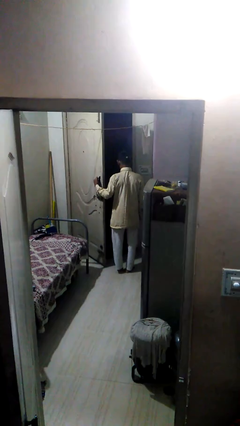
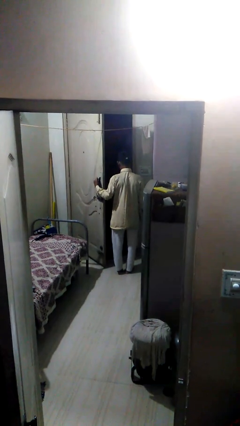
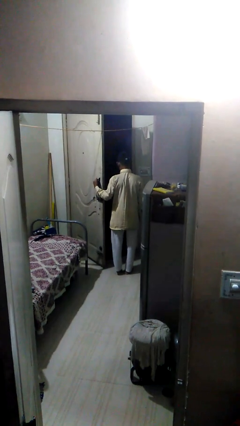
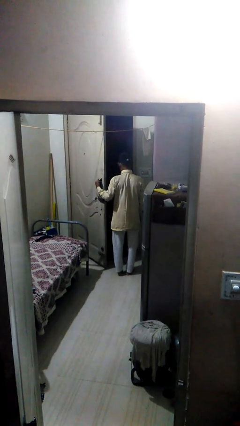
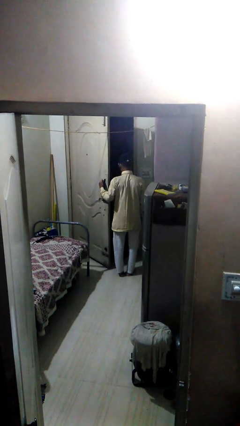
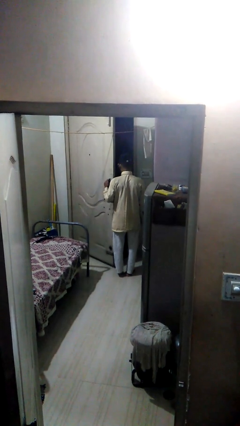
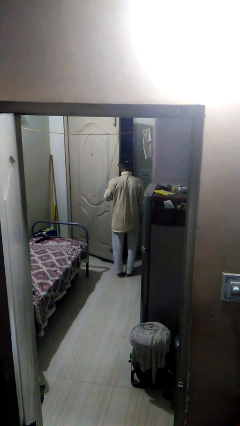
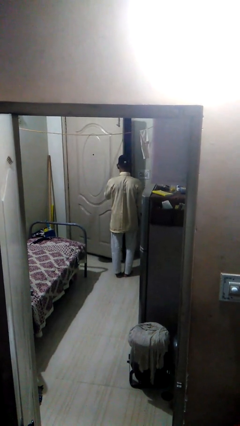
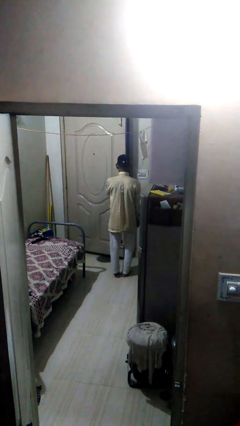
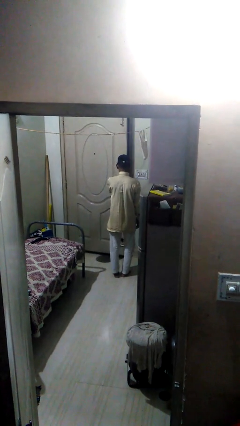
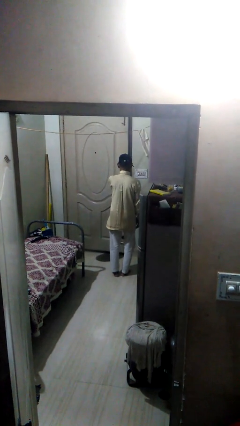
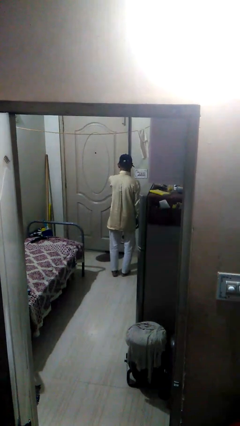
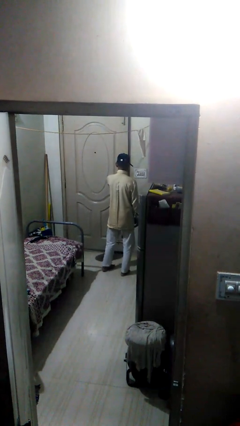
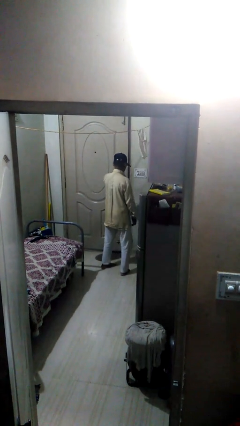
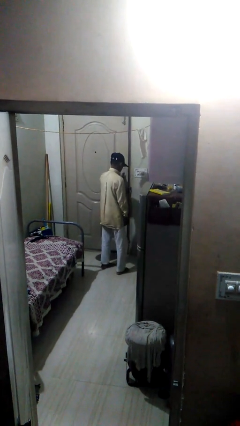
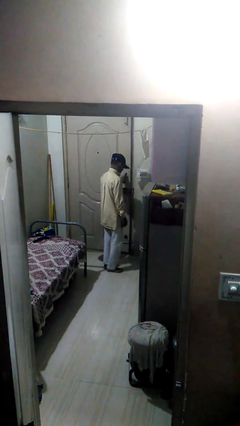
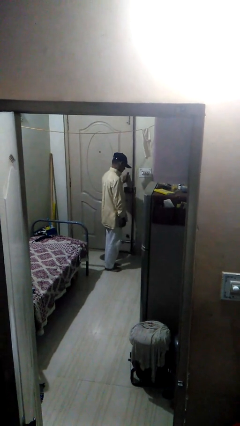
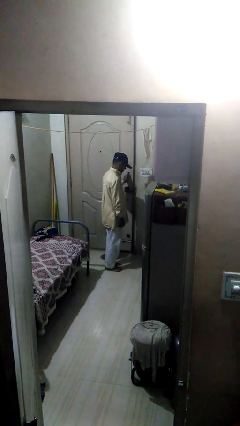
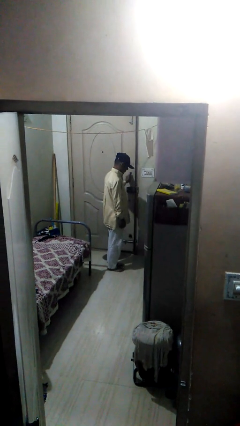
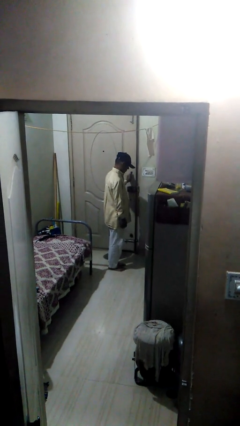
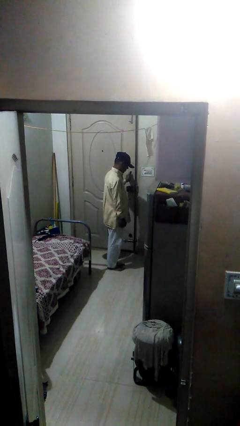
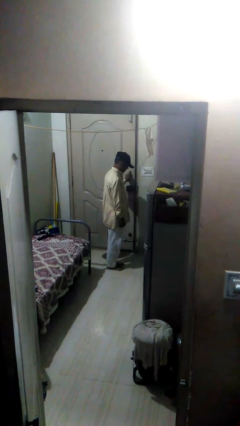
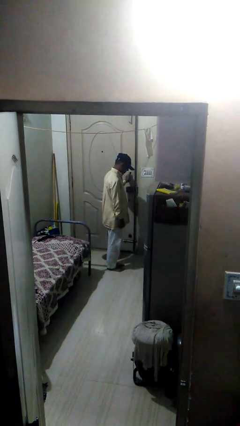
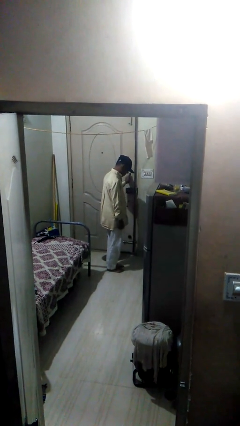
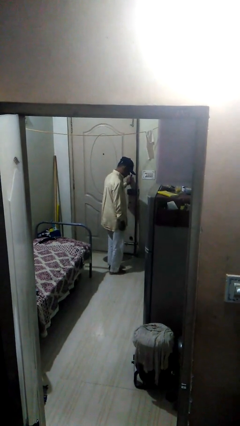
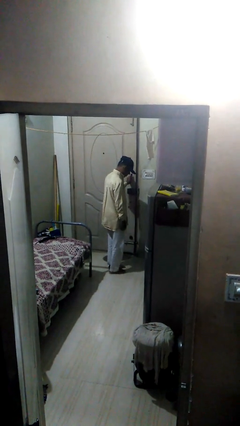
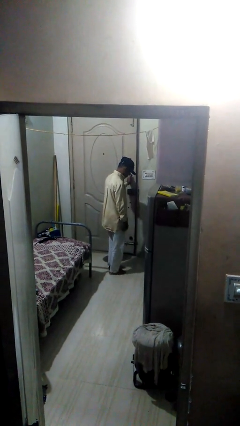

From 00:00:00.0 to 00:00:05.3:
person closes facility door

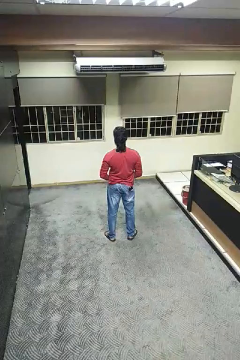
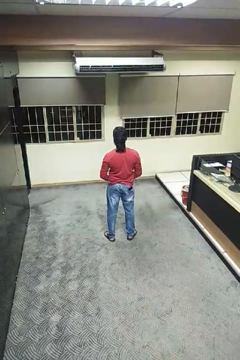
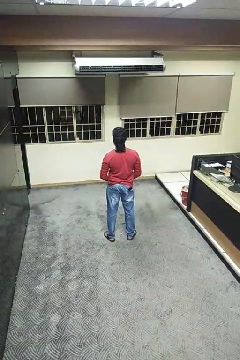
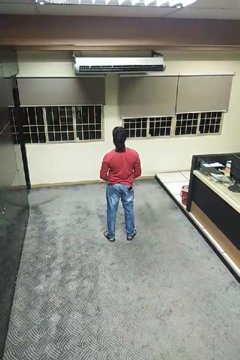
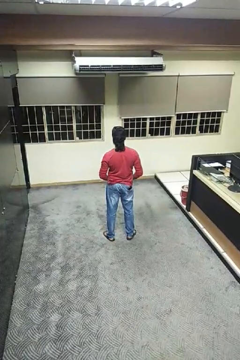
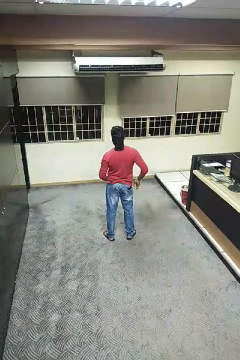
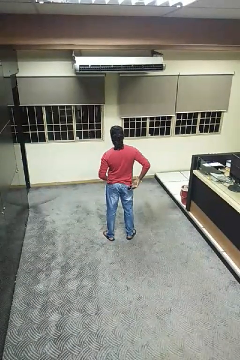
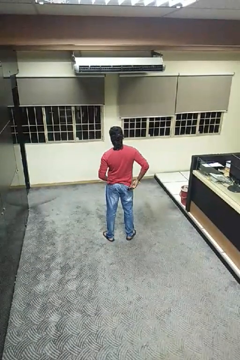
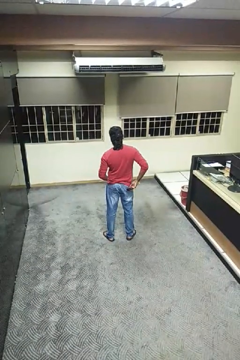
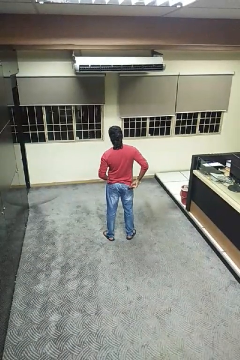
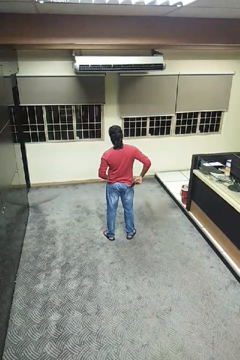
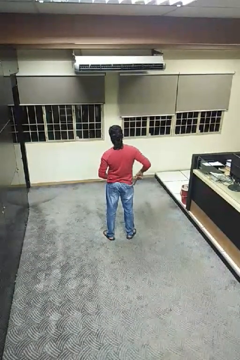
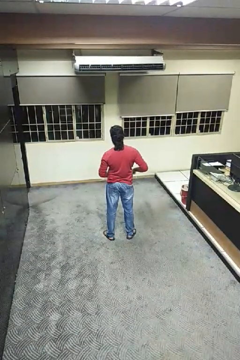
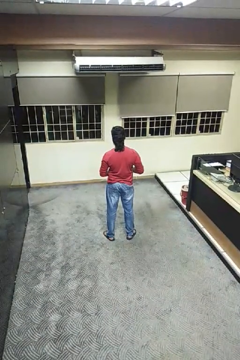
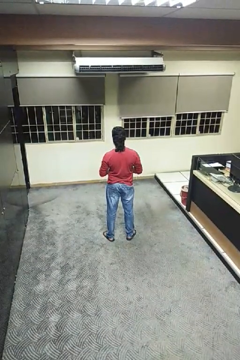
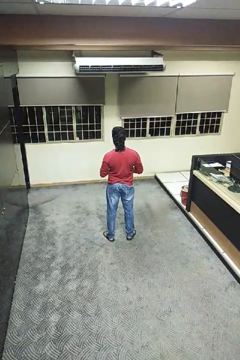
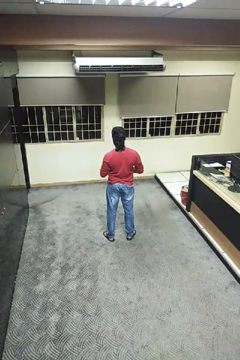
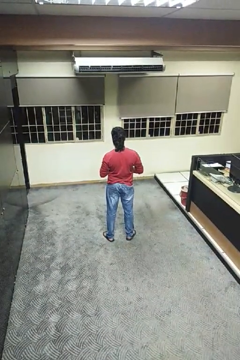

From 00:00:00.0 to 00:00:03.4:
person takes phone from pocket

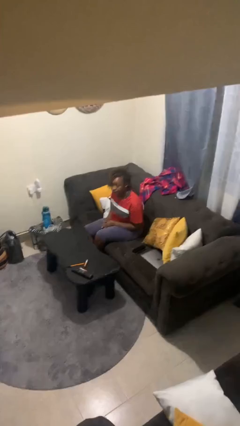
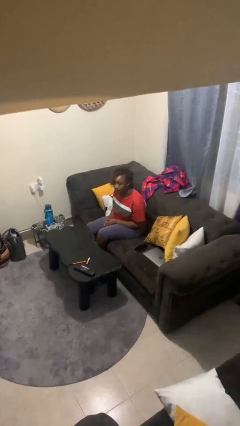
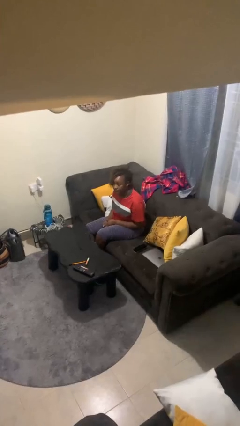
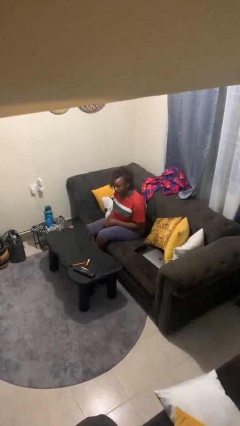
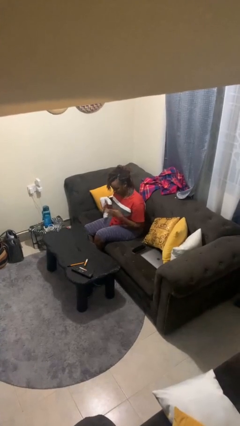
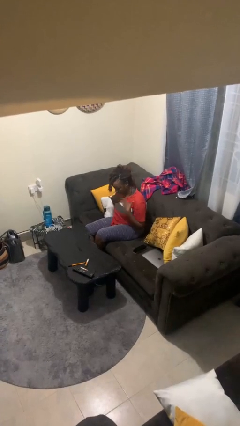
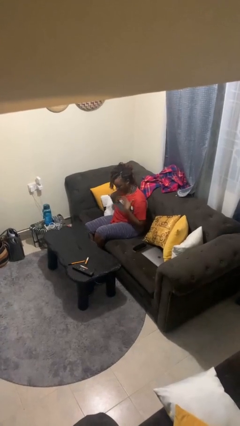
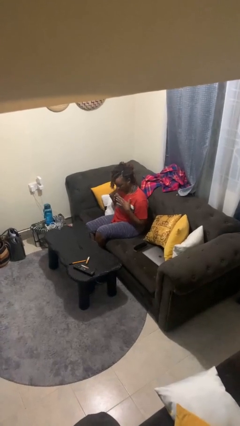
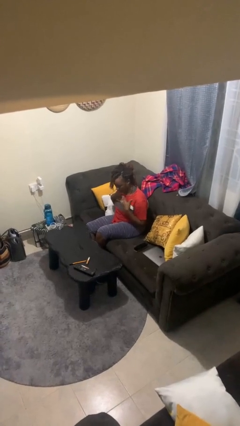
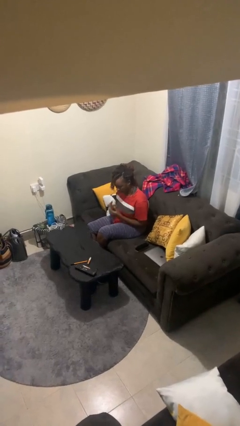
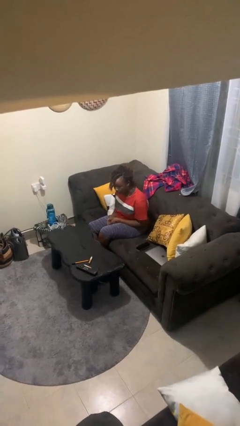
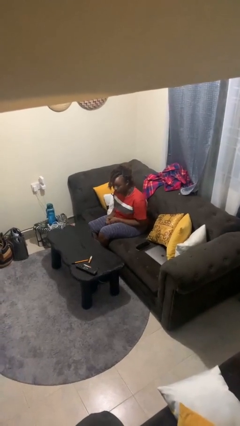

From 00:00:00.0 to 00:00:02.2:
person drums on chest

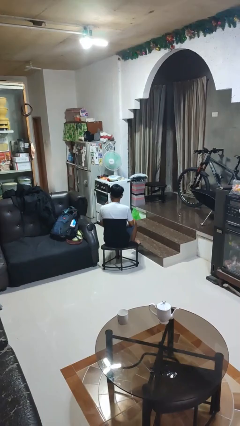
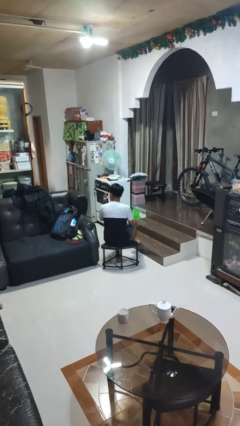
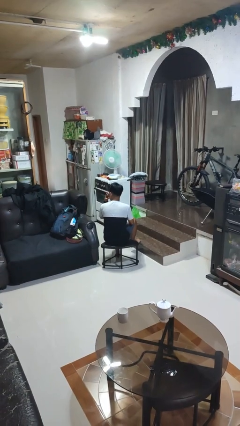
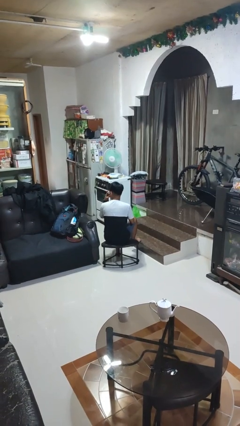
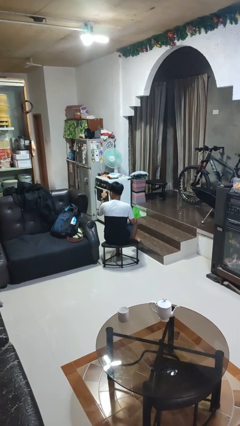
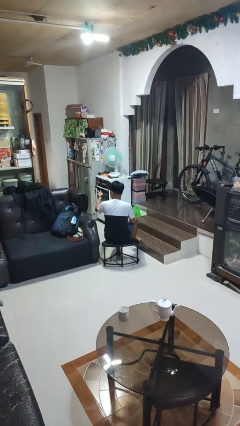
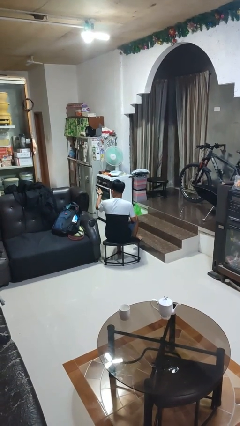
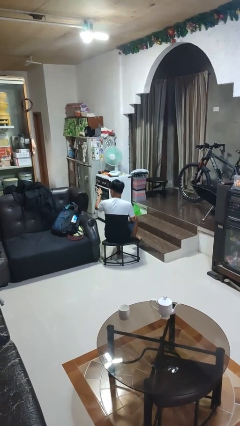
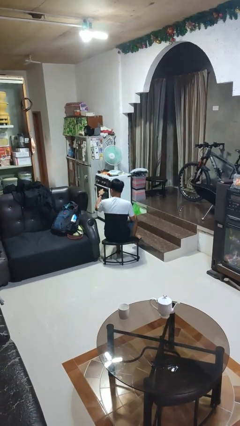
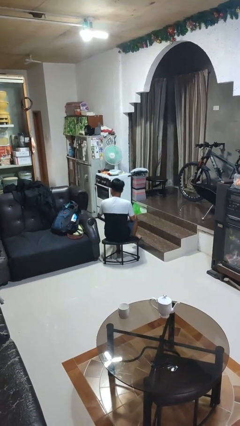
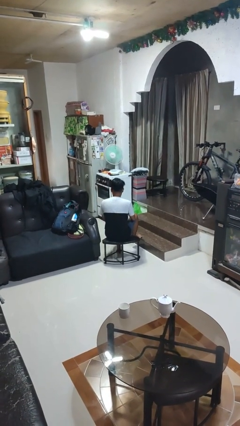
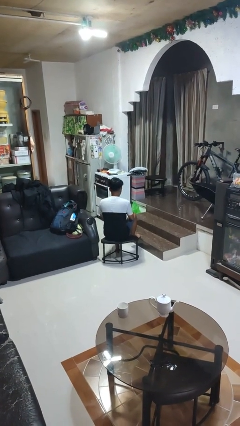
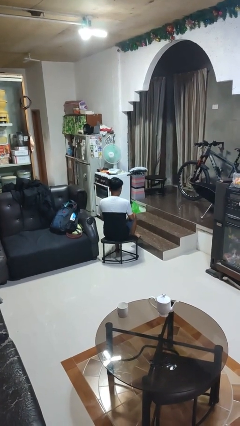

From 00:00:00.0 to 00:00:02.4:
person gestures watch closely

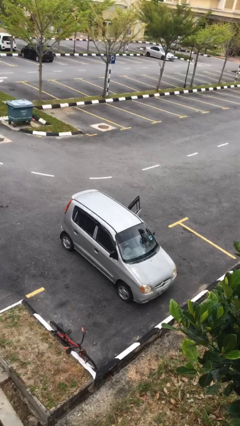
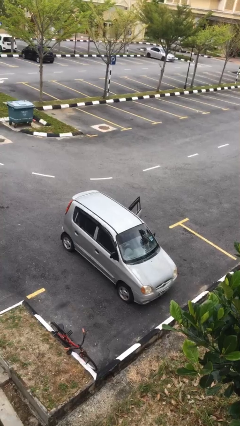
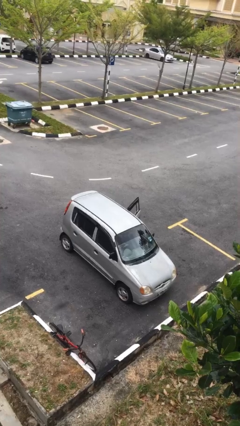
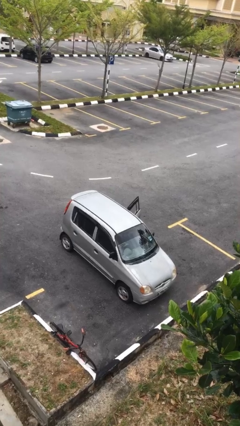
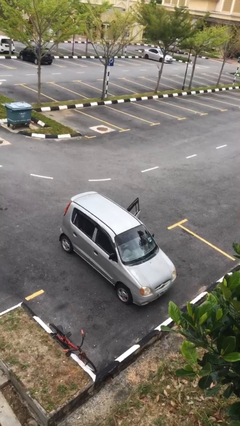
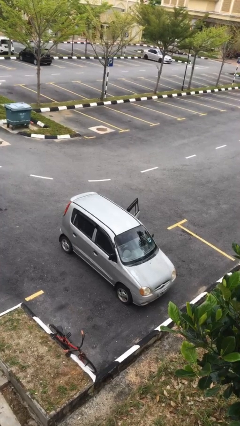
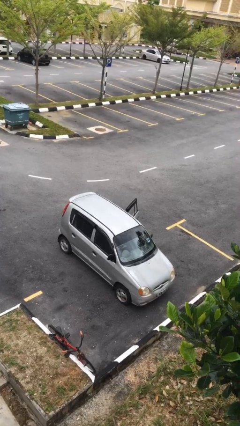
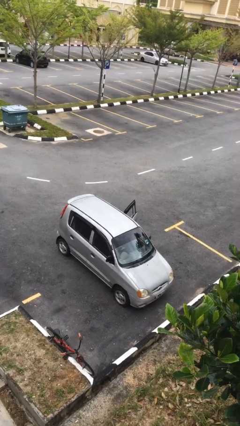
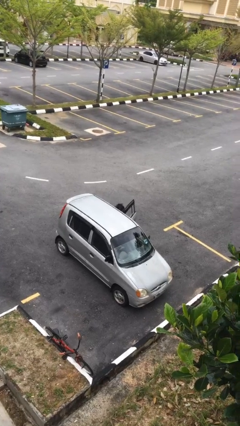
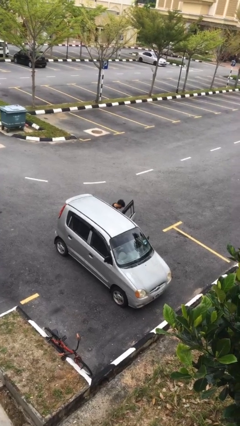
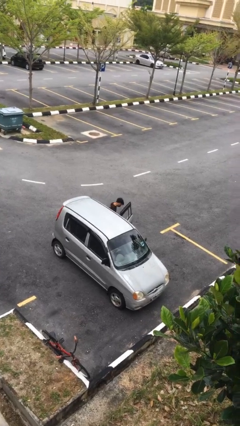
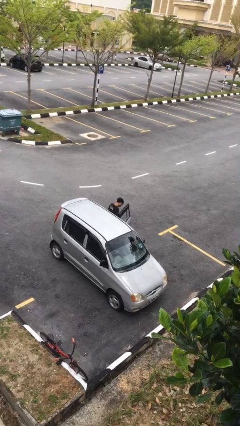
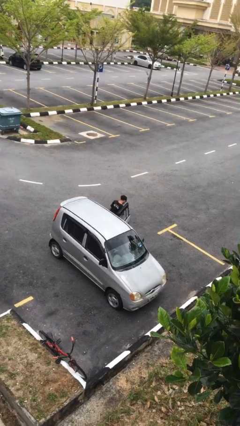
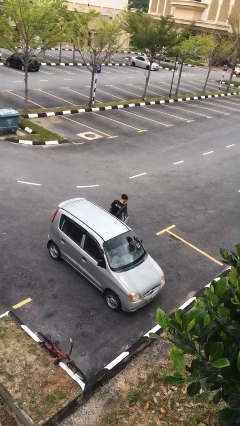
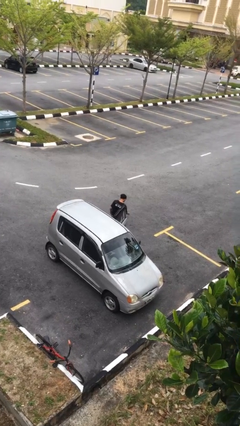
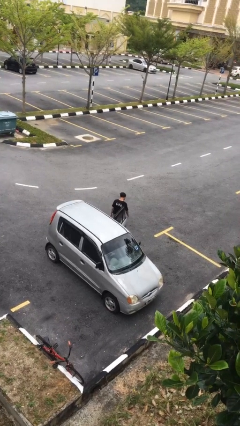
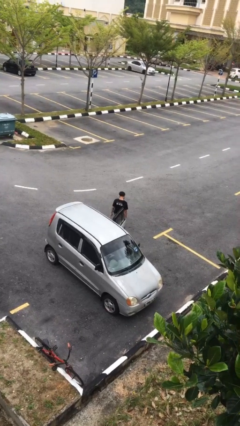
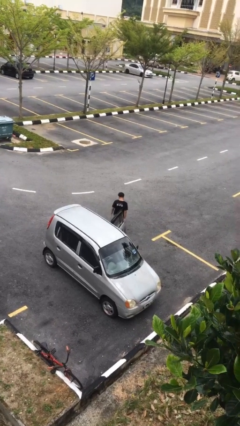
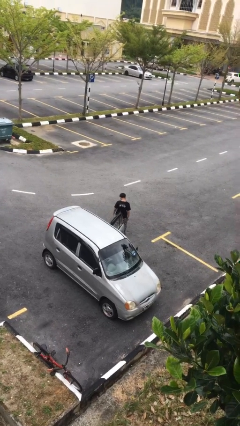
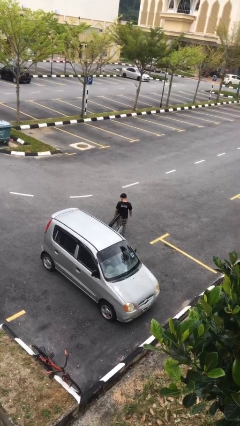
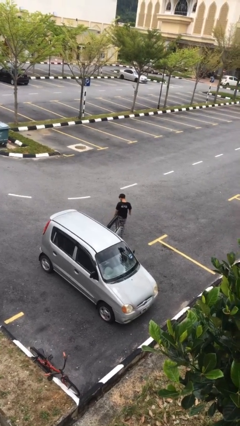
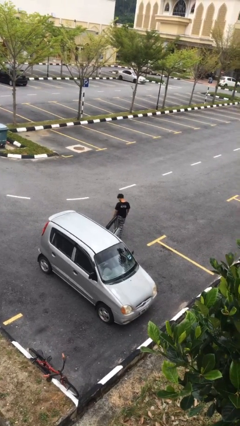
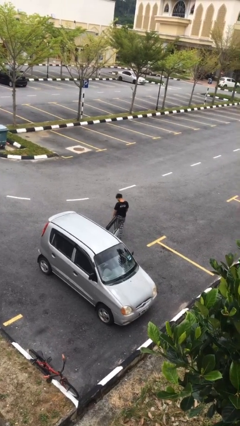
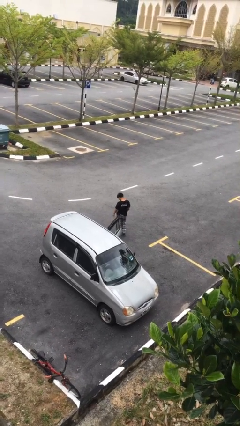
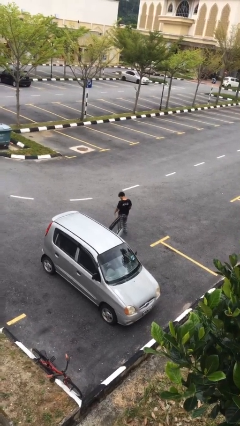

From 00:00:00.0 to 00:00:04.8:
person exits car
